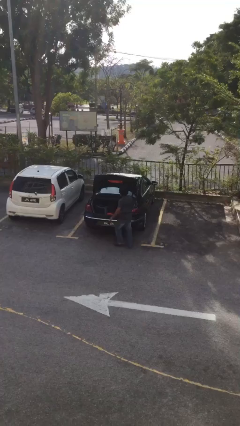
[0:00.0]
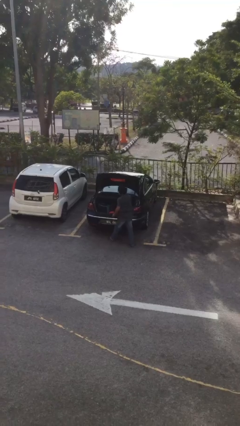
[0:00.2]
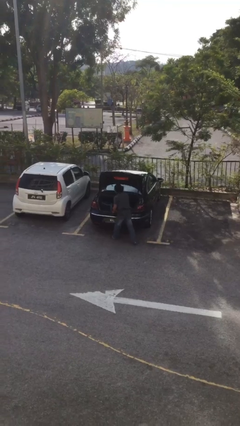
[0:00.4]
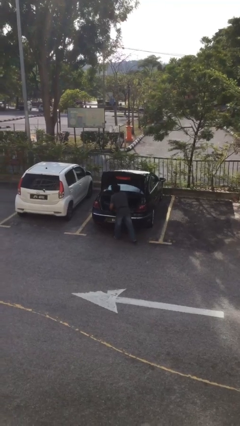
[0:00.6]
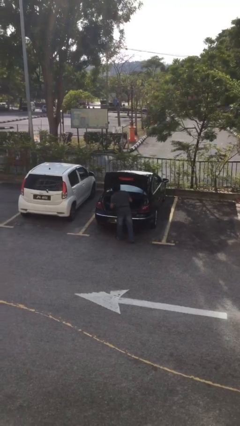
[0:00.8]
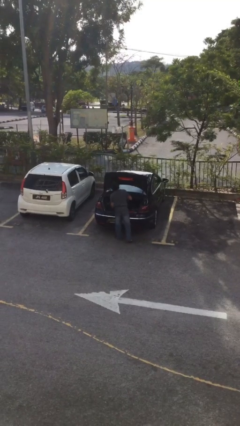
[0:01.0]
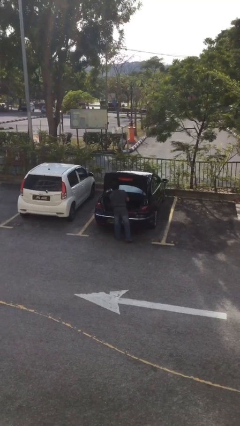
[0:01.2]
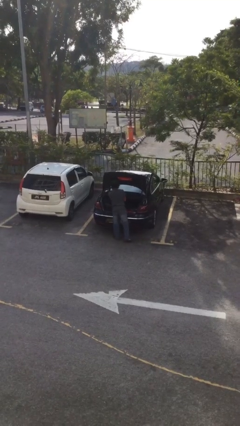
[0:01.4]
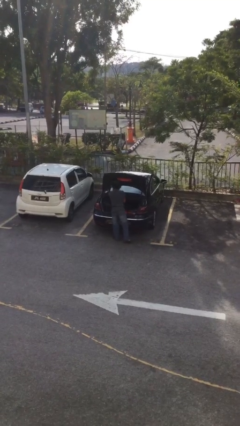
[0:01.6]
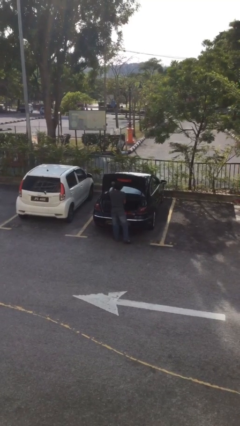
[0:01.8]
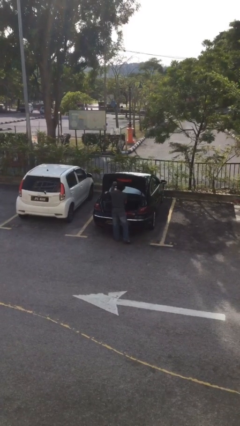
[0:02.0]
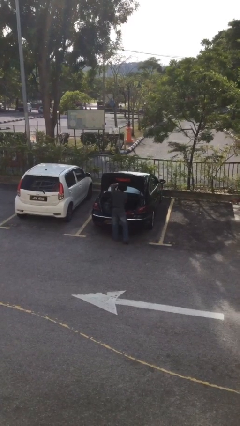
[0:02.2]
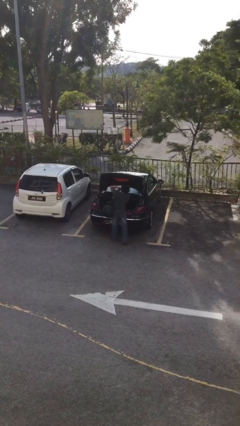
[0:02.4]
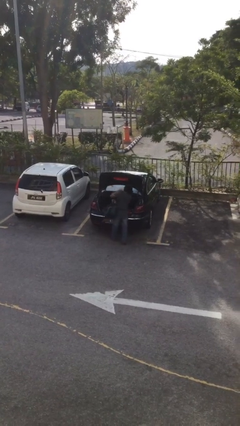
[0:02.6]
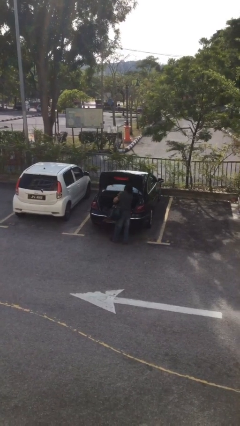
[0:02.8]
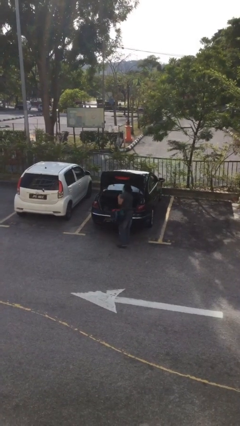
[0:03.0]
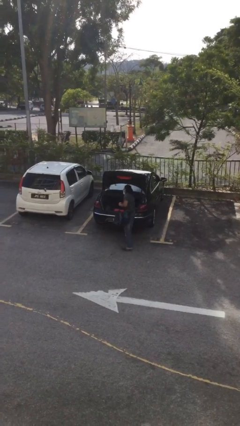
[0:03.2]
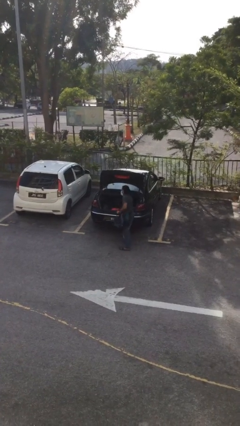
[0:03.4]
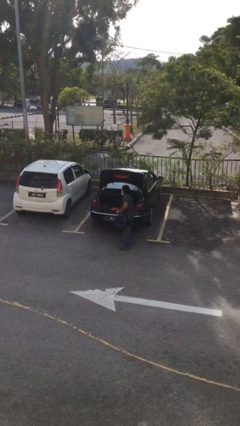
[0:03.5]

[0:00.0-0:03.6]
person unloads car

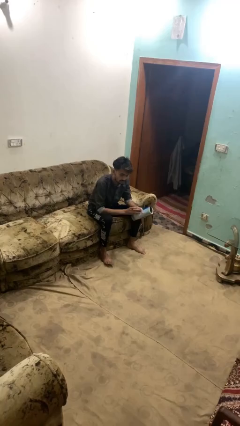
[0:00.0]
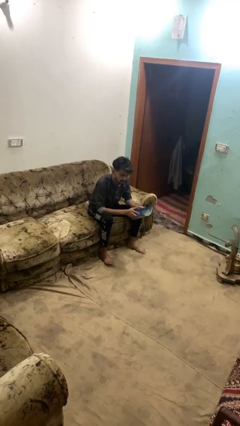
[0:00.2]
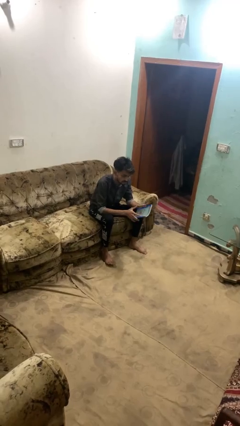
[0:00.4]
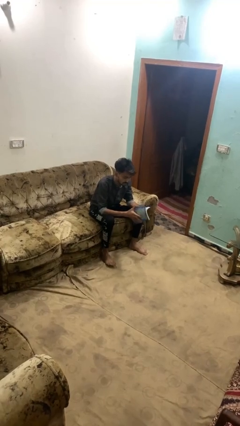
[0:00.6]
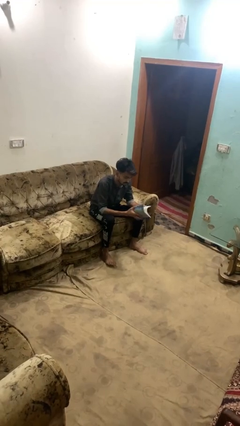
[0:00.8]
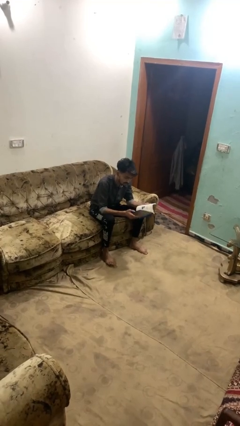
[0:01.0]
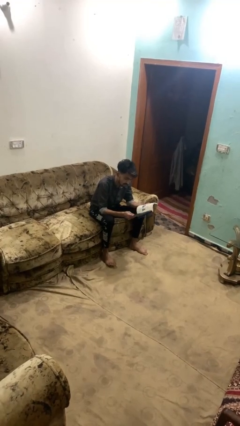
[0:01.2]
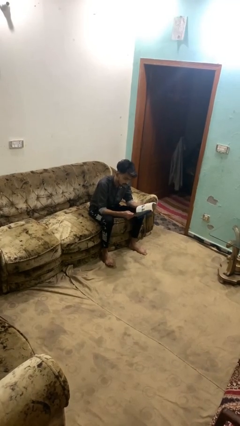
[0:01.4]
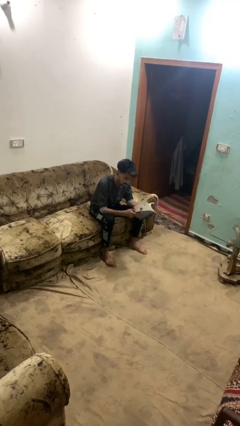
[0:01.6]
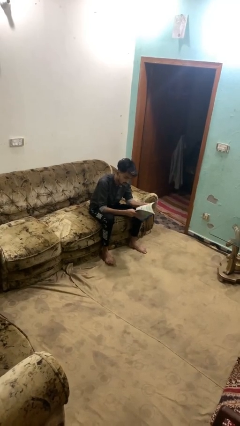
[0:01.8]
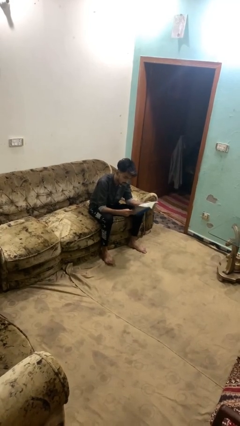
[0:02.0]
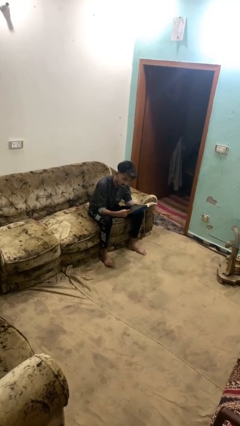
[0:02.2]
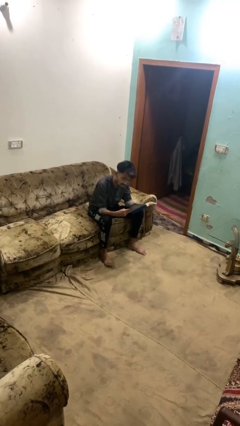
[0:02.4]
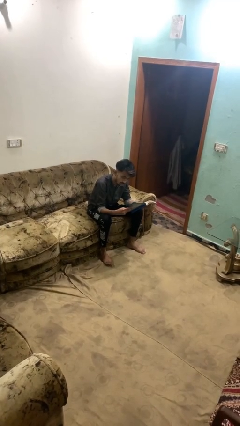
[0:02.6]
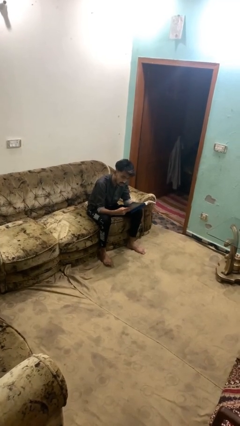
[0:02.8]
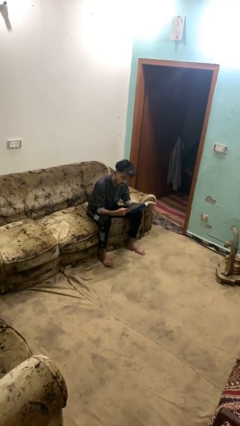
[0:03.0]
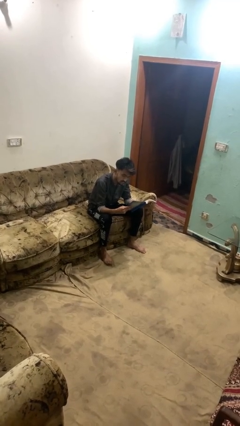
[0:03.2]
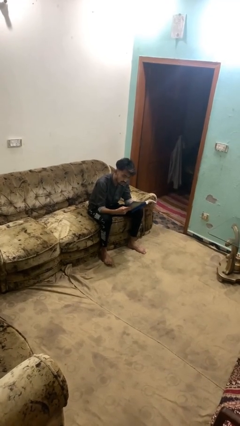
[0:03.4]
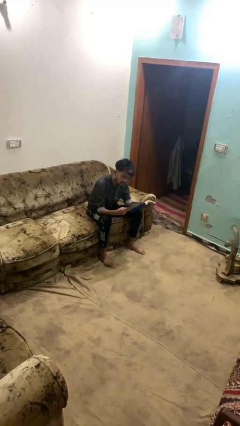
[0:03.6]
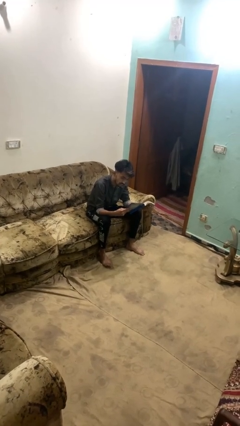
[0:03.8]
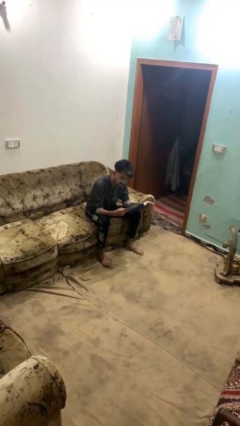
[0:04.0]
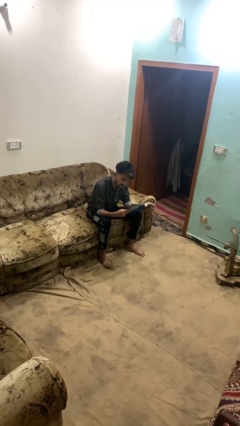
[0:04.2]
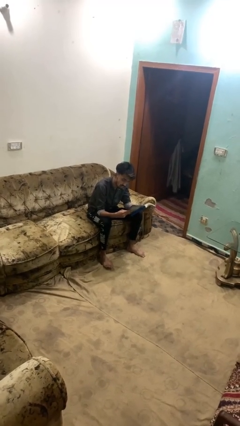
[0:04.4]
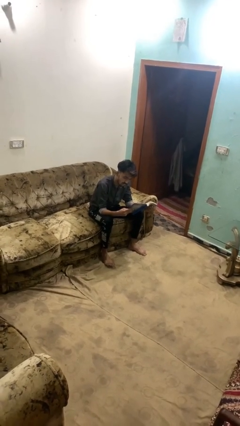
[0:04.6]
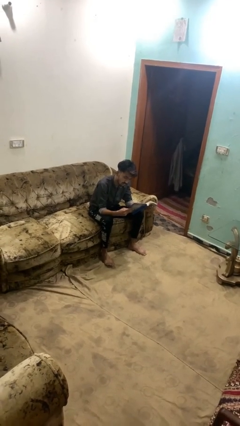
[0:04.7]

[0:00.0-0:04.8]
person reads book

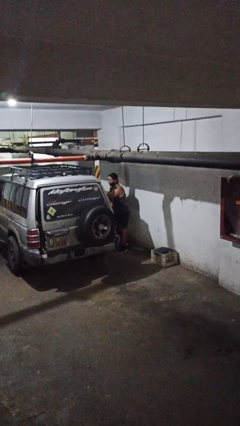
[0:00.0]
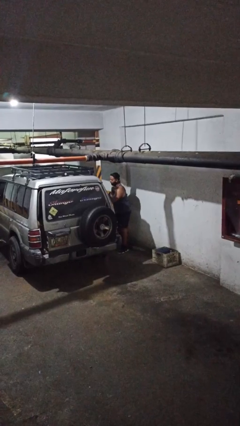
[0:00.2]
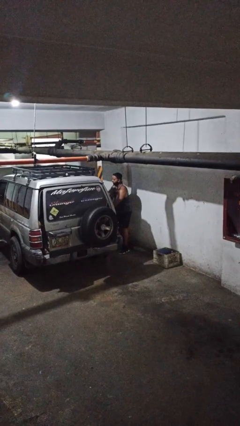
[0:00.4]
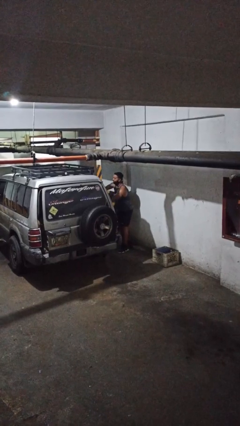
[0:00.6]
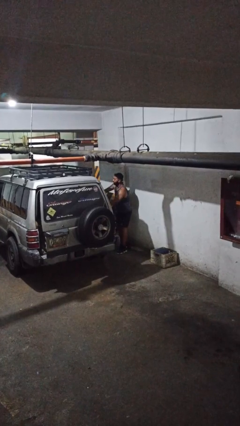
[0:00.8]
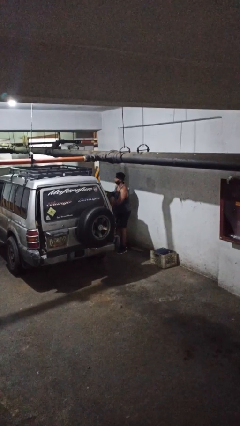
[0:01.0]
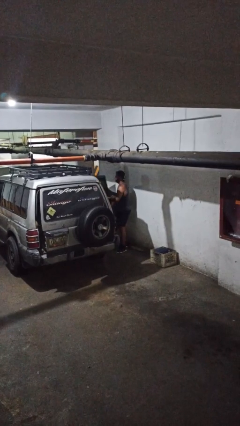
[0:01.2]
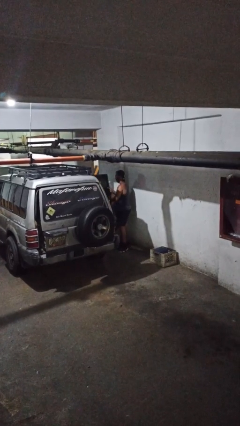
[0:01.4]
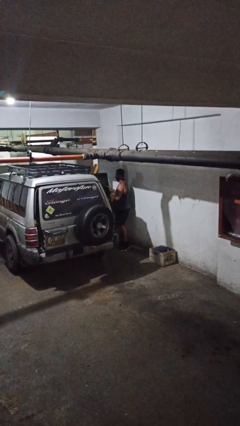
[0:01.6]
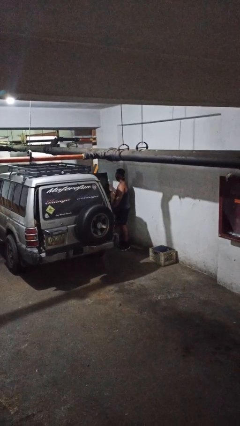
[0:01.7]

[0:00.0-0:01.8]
person opens car door

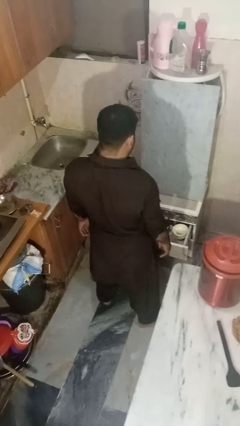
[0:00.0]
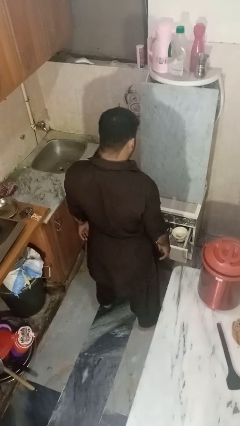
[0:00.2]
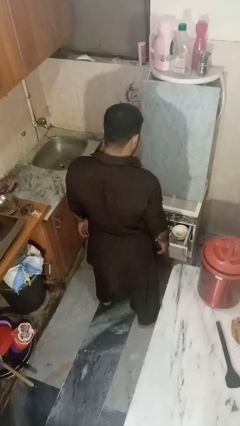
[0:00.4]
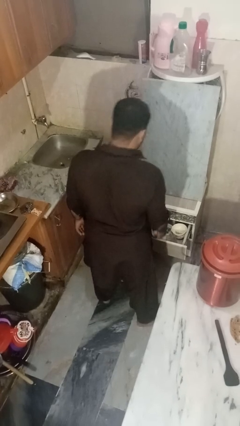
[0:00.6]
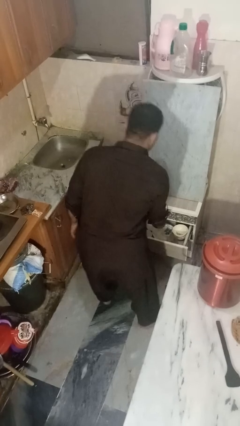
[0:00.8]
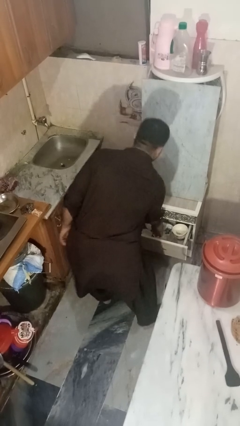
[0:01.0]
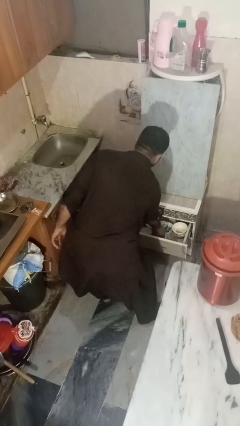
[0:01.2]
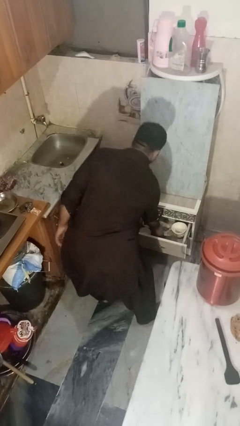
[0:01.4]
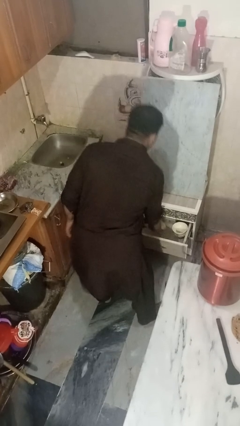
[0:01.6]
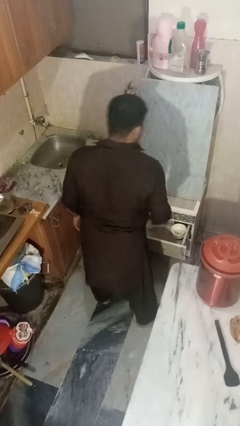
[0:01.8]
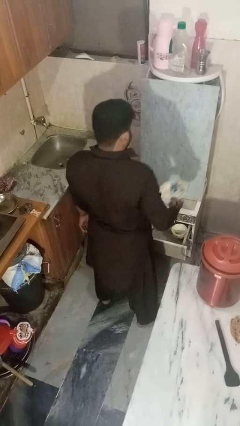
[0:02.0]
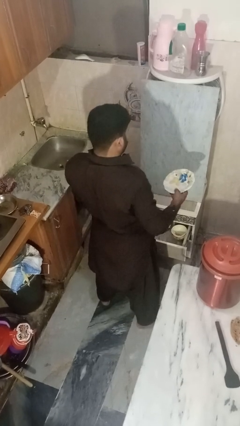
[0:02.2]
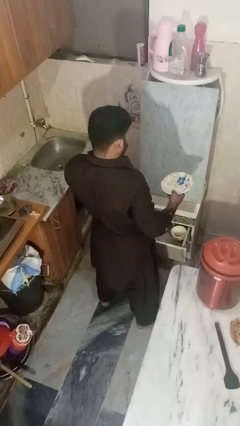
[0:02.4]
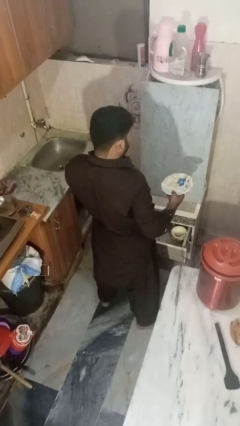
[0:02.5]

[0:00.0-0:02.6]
person takes object from kitchen drawer

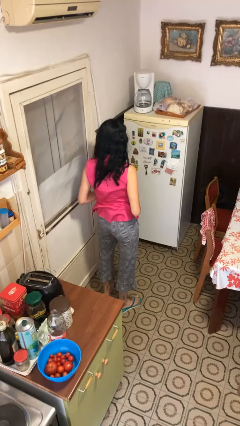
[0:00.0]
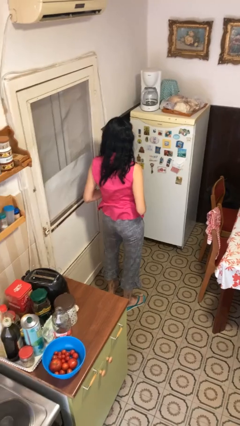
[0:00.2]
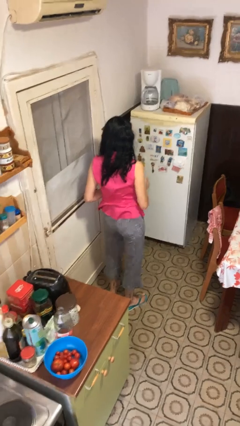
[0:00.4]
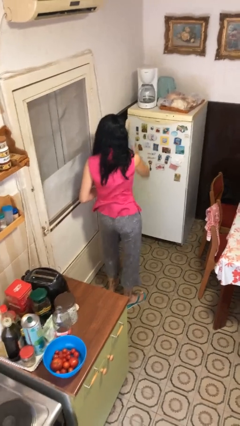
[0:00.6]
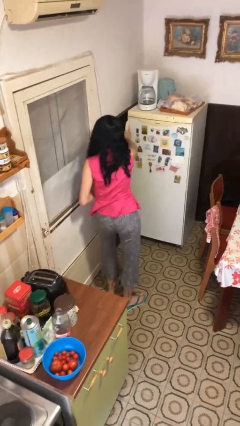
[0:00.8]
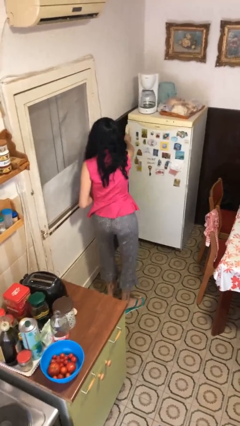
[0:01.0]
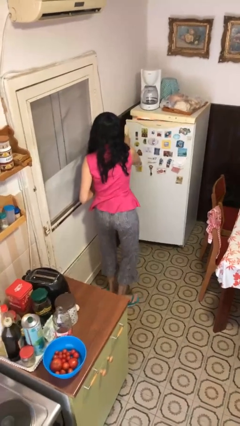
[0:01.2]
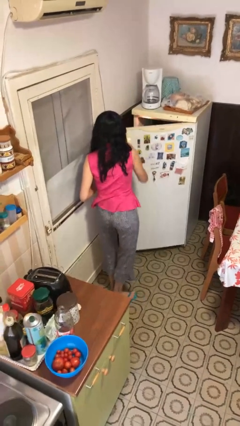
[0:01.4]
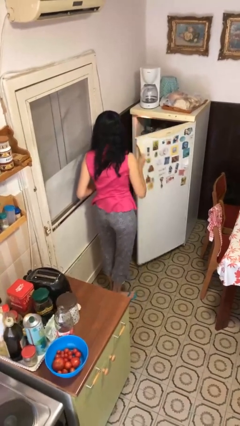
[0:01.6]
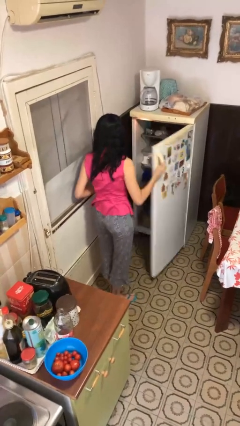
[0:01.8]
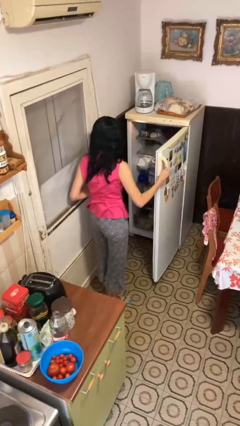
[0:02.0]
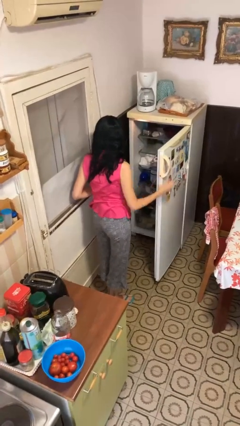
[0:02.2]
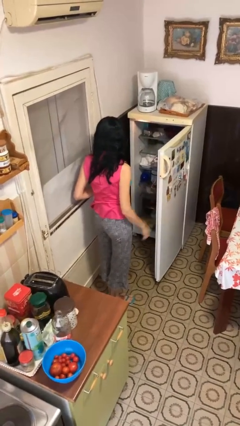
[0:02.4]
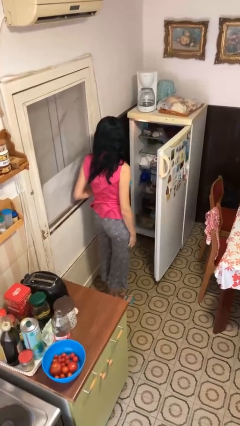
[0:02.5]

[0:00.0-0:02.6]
person opens refrigerator

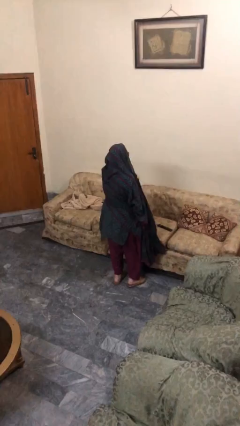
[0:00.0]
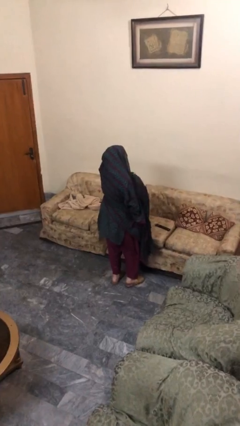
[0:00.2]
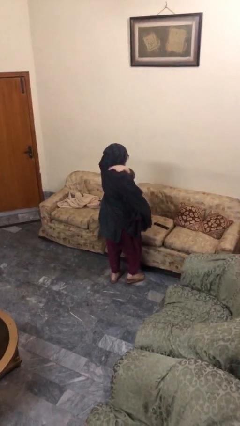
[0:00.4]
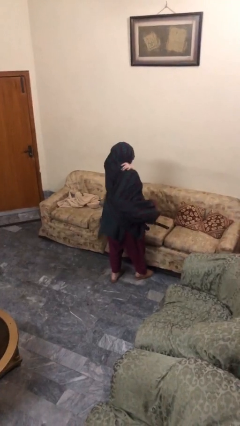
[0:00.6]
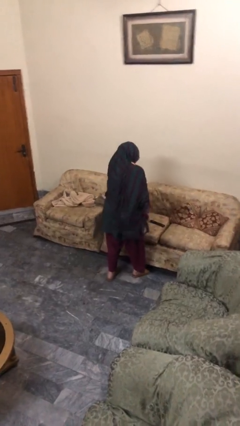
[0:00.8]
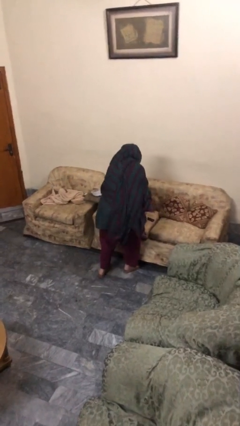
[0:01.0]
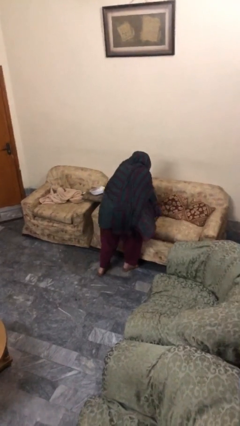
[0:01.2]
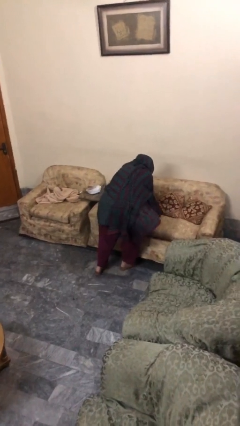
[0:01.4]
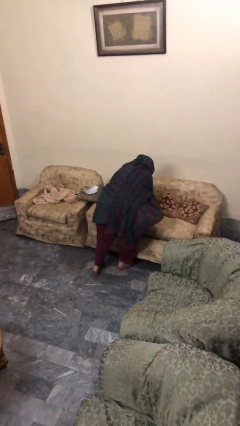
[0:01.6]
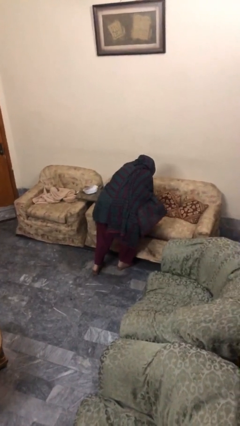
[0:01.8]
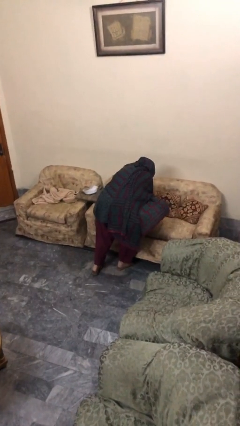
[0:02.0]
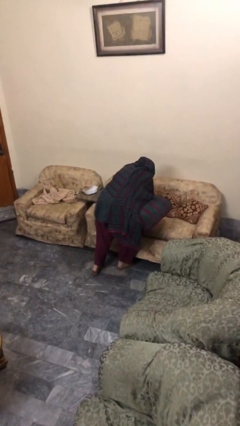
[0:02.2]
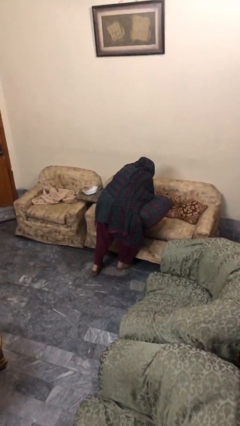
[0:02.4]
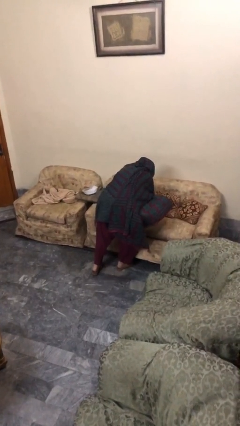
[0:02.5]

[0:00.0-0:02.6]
person searches in couch
